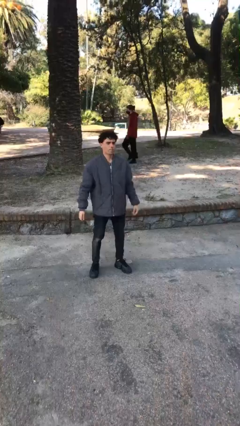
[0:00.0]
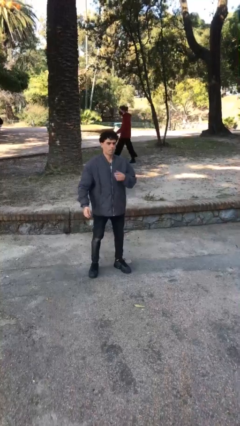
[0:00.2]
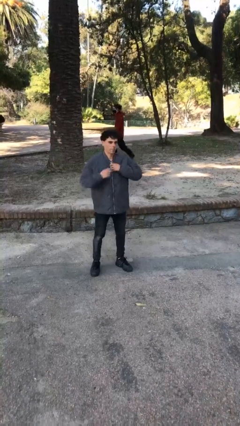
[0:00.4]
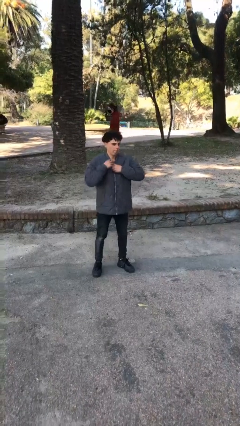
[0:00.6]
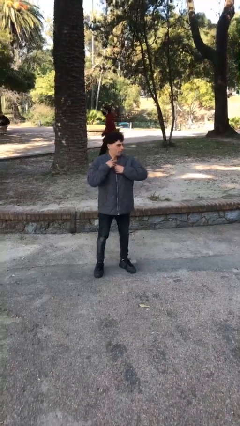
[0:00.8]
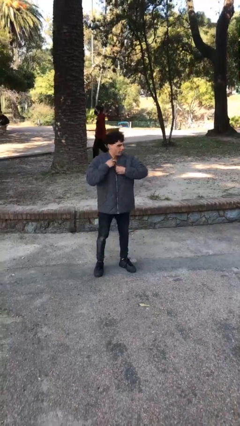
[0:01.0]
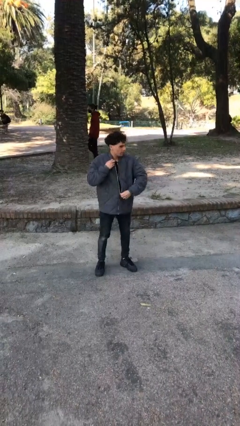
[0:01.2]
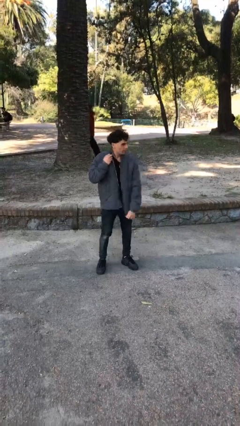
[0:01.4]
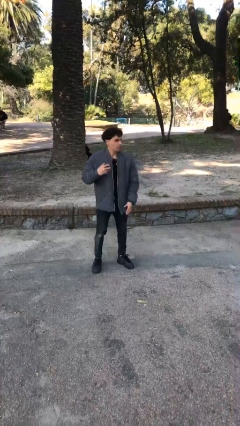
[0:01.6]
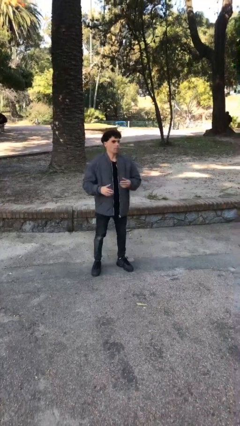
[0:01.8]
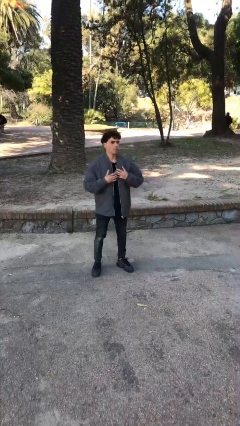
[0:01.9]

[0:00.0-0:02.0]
person unzips jacket

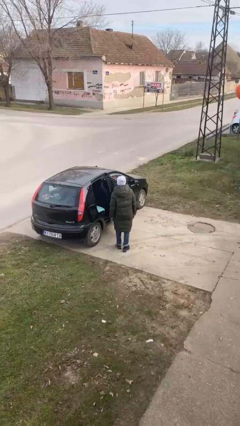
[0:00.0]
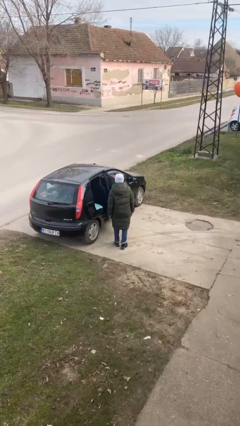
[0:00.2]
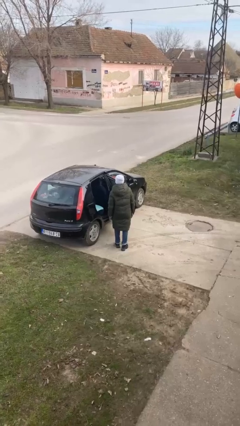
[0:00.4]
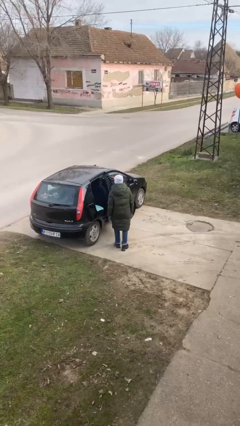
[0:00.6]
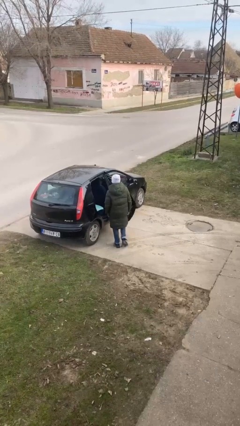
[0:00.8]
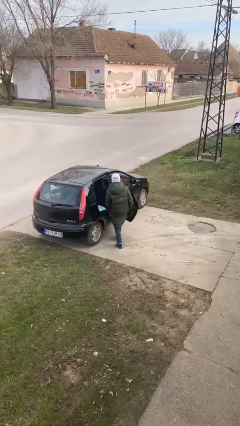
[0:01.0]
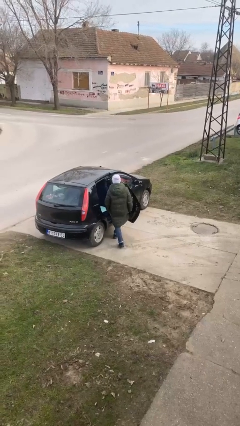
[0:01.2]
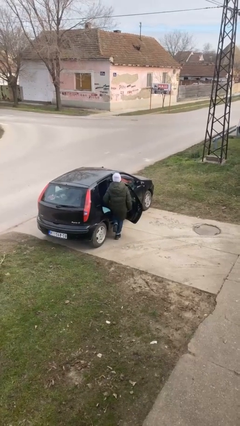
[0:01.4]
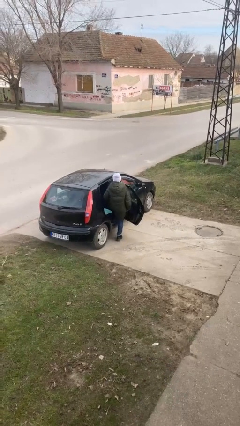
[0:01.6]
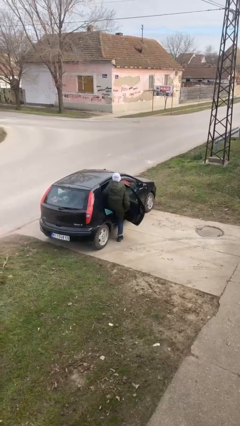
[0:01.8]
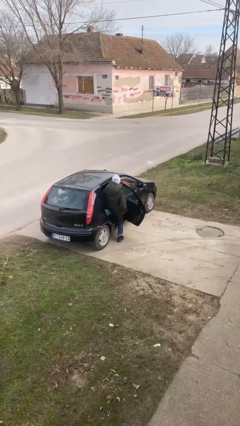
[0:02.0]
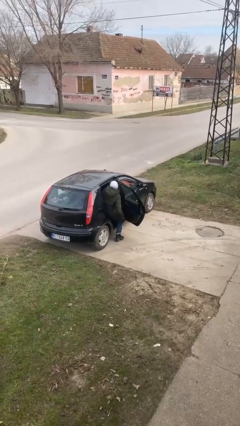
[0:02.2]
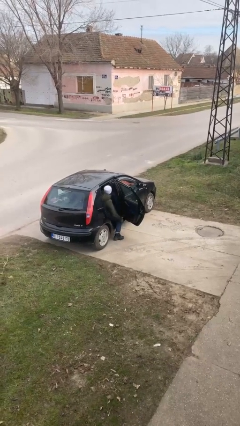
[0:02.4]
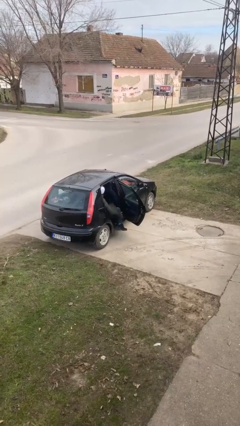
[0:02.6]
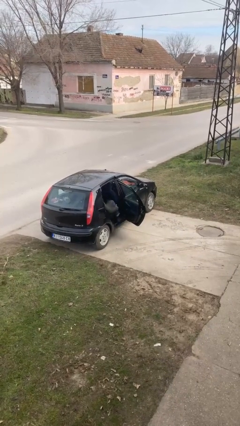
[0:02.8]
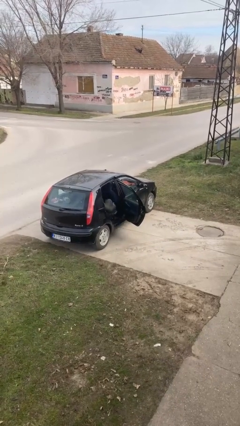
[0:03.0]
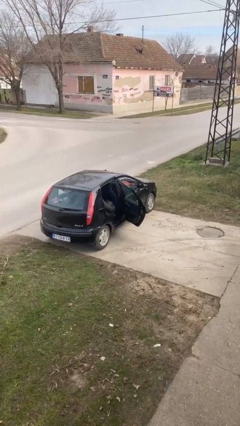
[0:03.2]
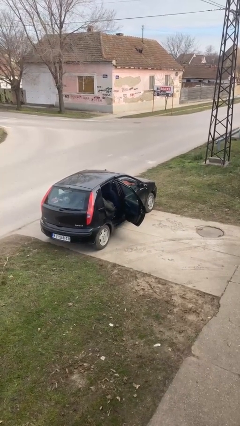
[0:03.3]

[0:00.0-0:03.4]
person enters car

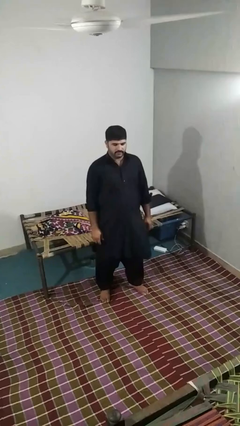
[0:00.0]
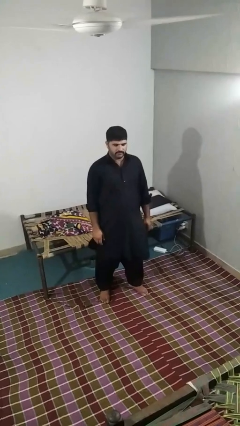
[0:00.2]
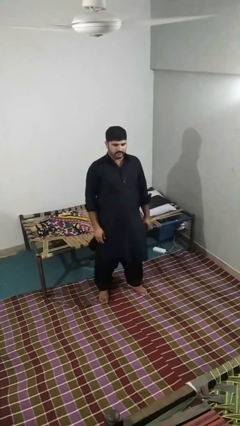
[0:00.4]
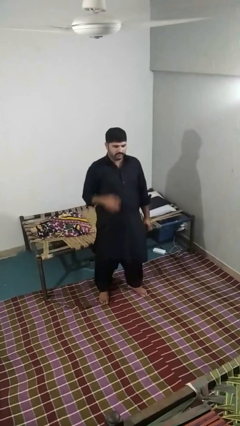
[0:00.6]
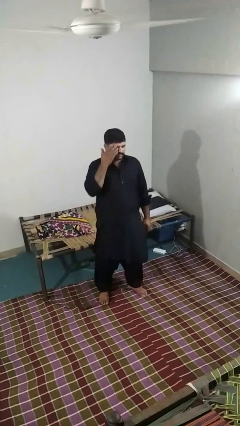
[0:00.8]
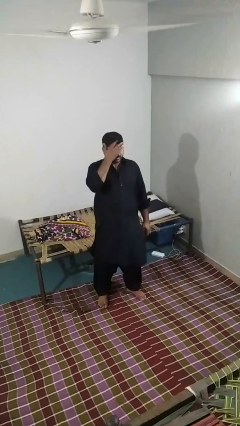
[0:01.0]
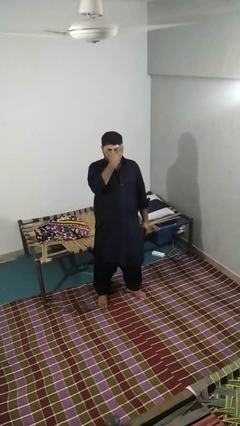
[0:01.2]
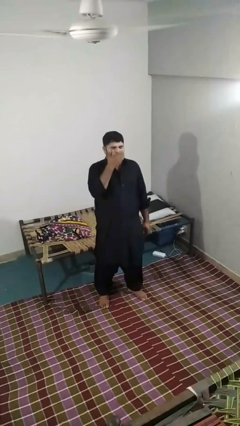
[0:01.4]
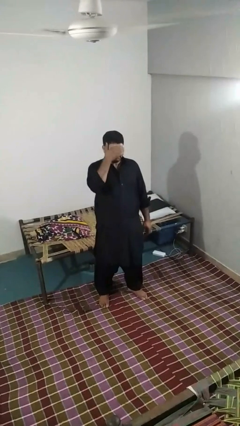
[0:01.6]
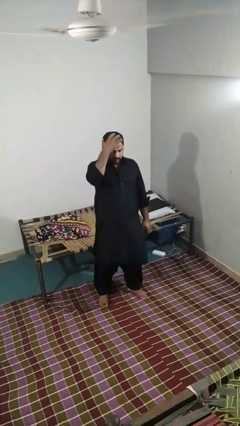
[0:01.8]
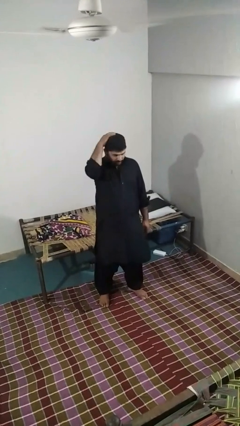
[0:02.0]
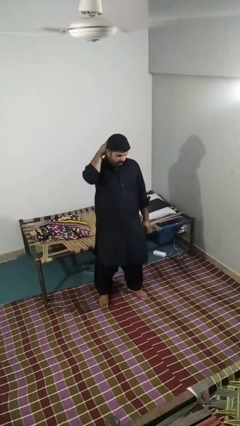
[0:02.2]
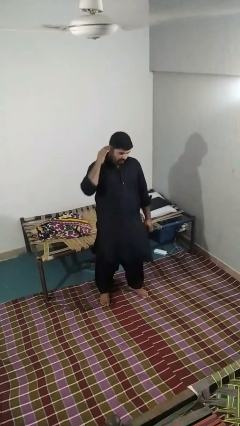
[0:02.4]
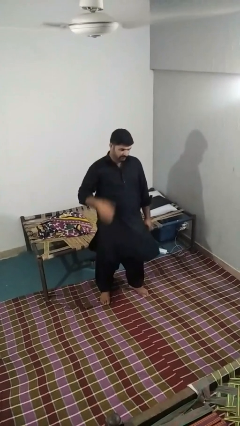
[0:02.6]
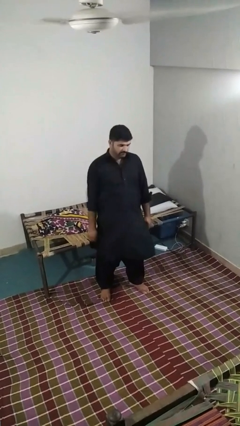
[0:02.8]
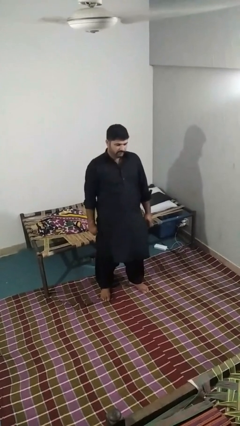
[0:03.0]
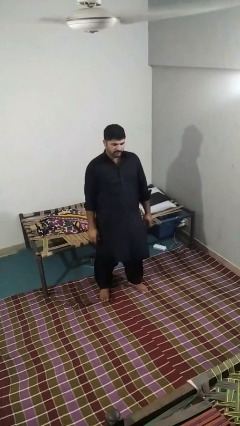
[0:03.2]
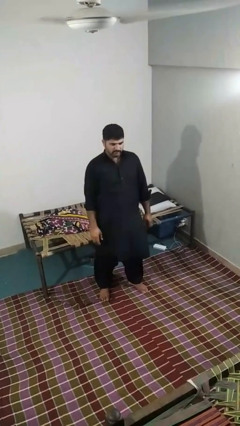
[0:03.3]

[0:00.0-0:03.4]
person scratches face

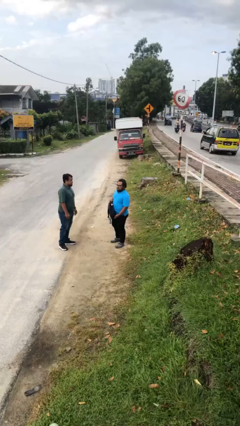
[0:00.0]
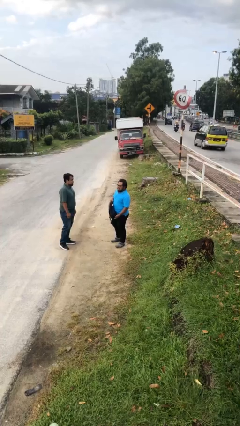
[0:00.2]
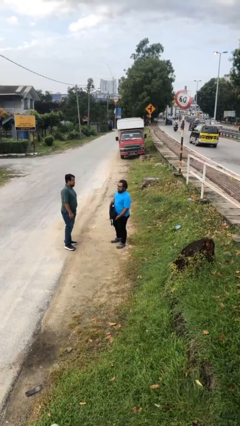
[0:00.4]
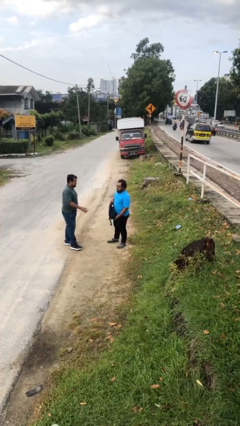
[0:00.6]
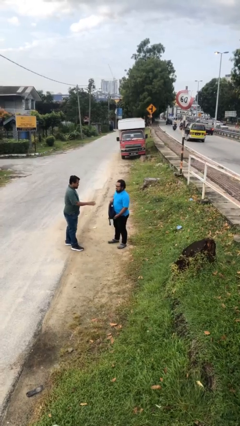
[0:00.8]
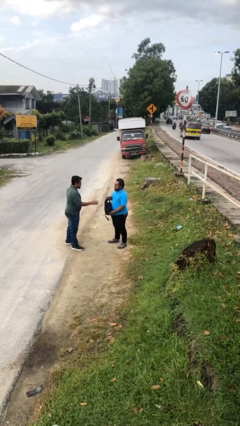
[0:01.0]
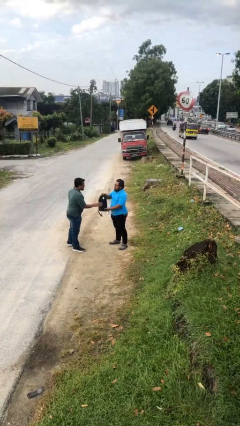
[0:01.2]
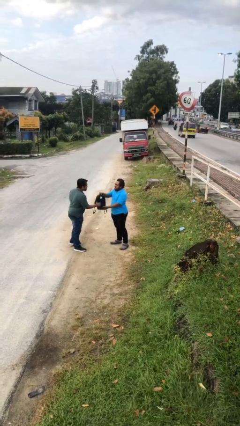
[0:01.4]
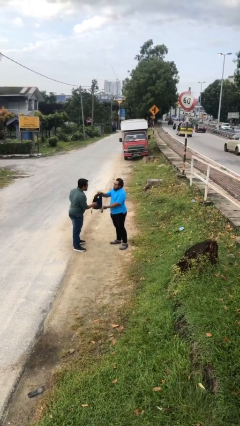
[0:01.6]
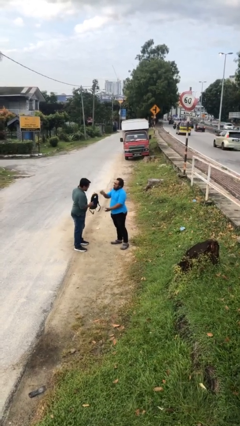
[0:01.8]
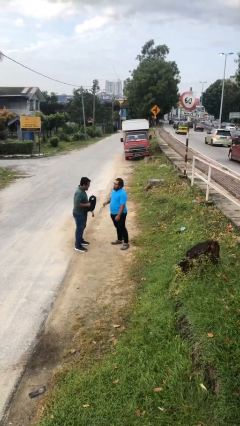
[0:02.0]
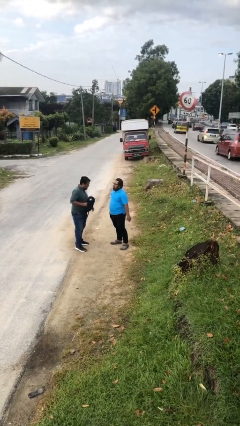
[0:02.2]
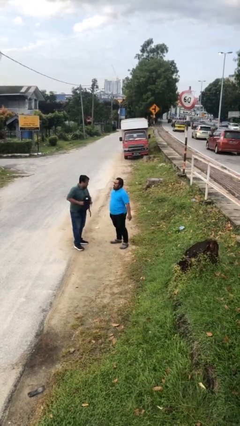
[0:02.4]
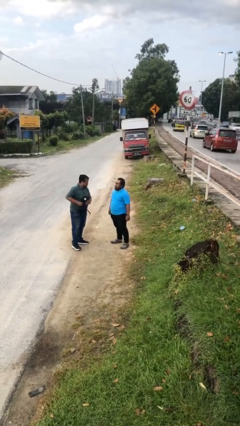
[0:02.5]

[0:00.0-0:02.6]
person transfers object to person

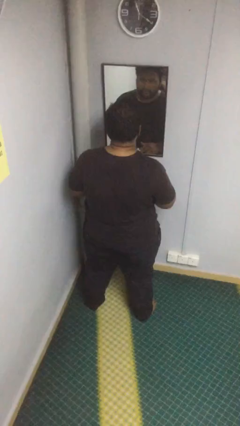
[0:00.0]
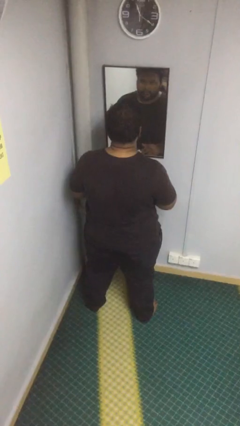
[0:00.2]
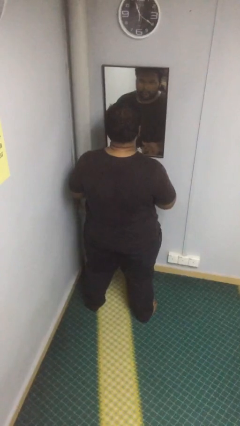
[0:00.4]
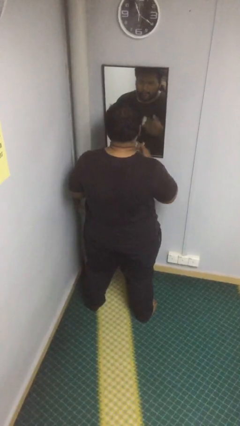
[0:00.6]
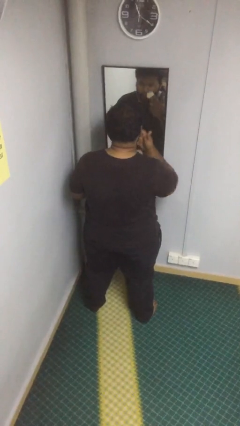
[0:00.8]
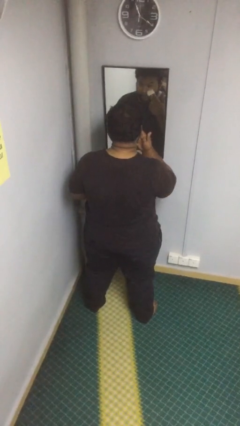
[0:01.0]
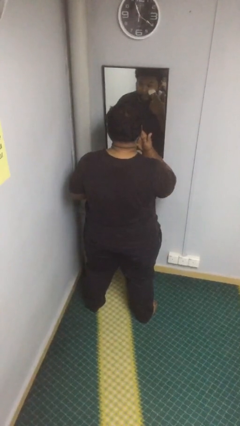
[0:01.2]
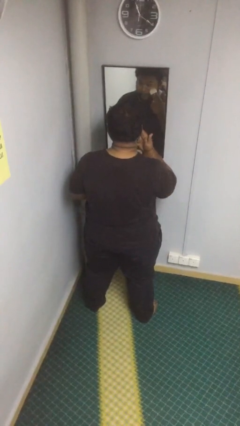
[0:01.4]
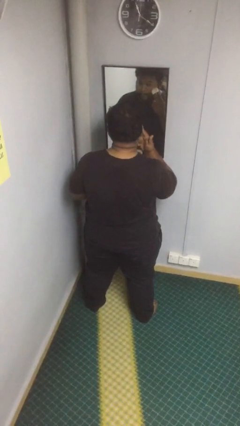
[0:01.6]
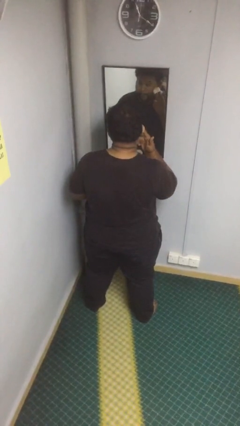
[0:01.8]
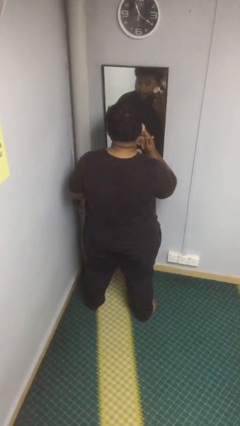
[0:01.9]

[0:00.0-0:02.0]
person applies foundation makeup

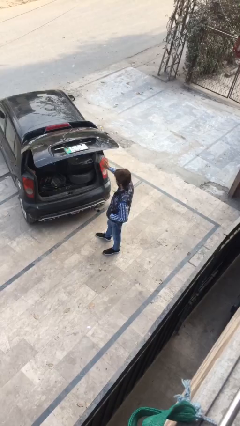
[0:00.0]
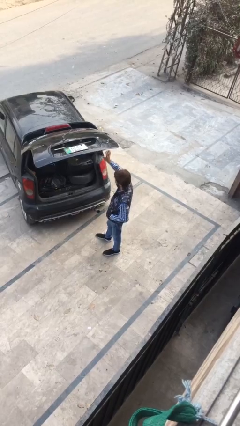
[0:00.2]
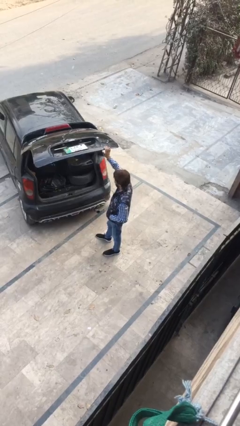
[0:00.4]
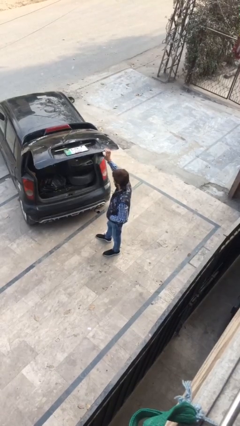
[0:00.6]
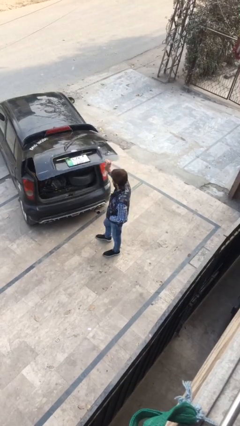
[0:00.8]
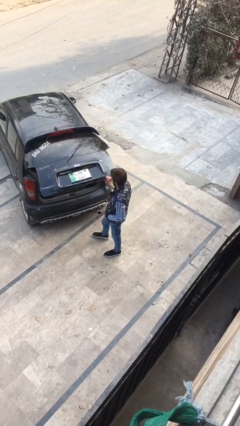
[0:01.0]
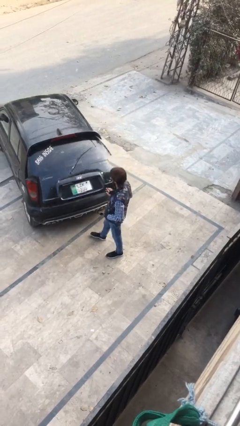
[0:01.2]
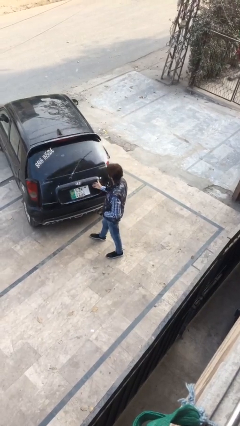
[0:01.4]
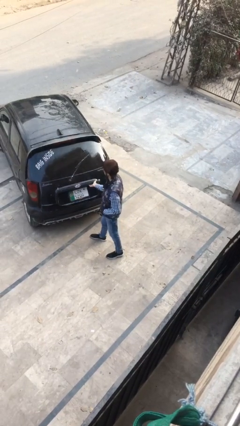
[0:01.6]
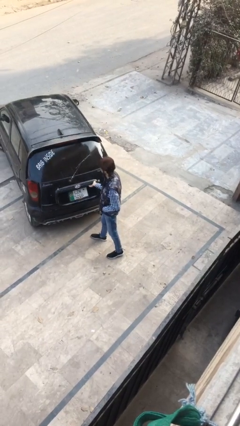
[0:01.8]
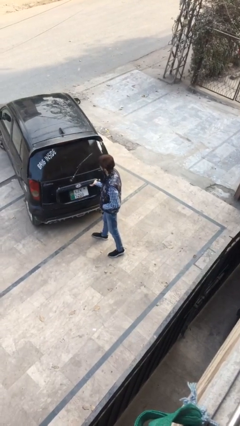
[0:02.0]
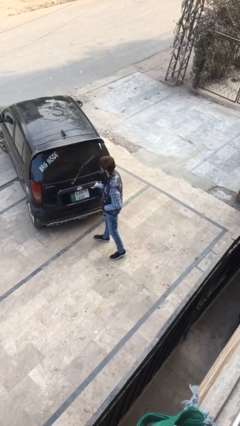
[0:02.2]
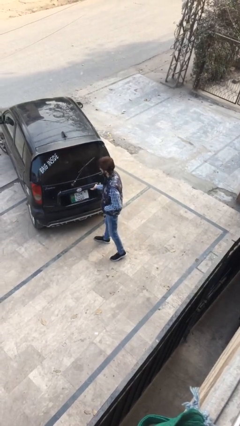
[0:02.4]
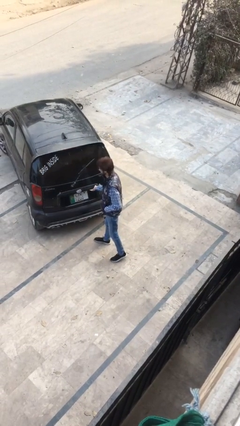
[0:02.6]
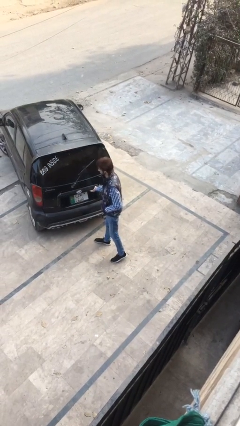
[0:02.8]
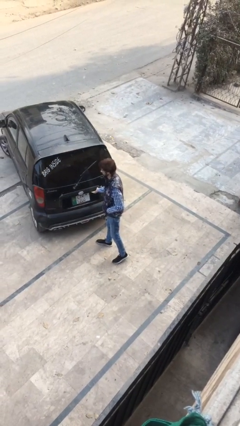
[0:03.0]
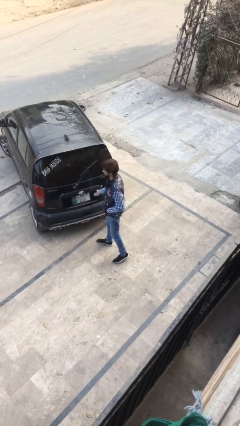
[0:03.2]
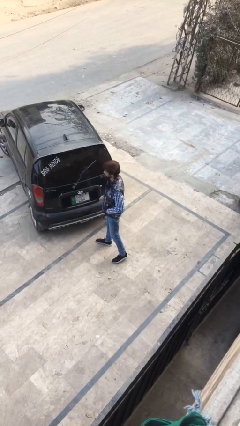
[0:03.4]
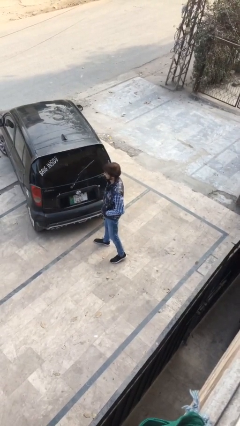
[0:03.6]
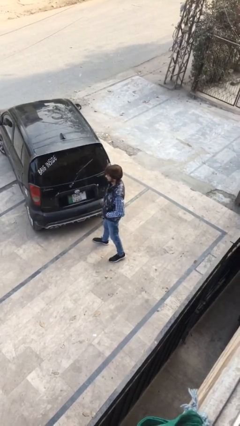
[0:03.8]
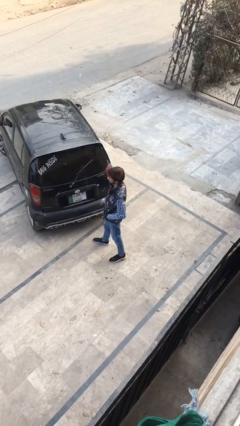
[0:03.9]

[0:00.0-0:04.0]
person closes car trunk
